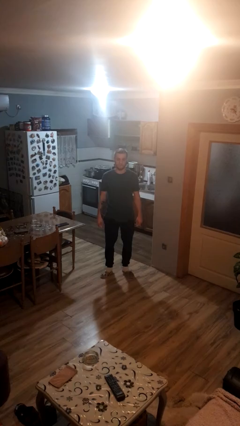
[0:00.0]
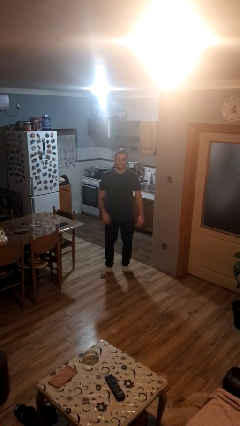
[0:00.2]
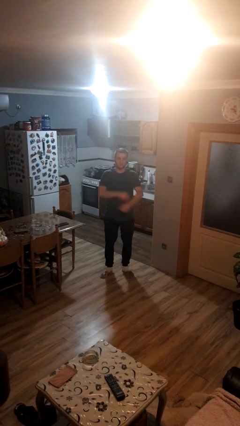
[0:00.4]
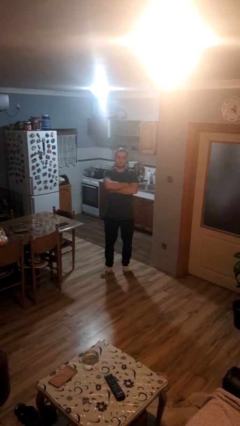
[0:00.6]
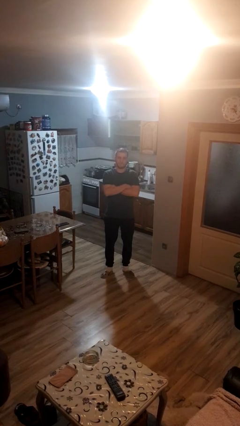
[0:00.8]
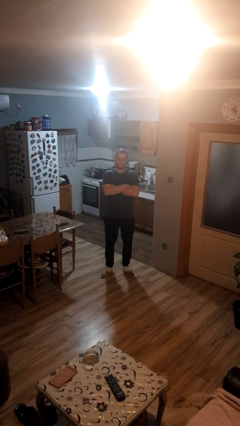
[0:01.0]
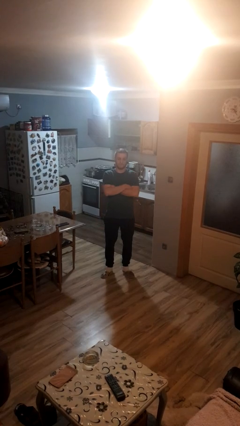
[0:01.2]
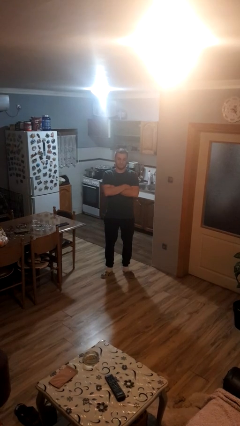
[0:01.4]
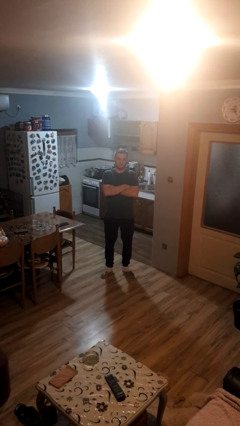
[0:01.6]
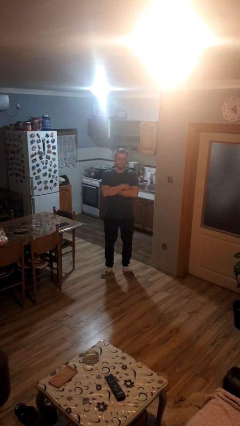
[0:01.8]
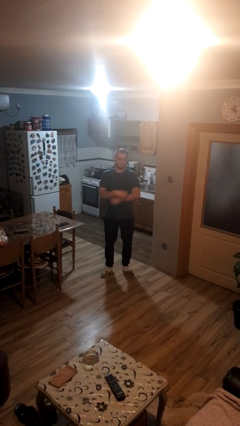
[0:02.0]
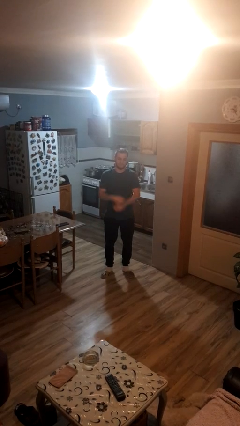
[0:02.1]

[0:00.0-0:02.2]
person crosses arms

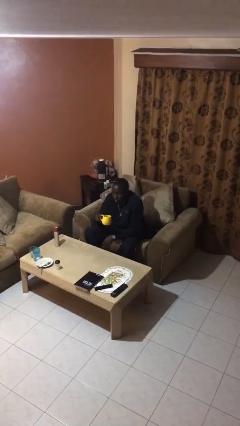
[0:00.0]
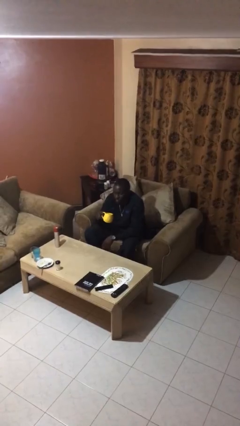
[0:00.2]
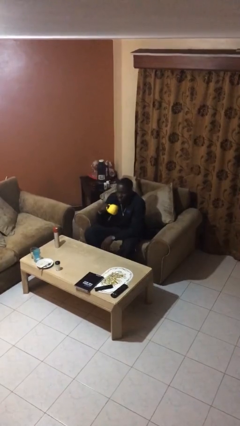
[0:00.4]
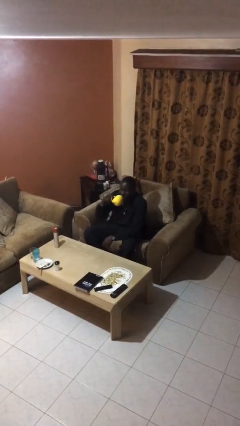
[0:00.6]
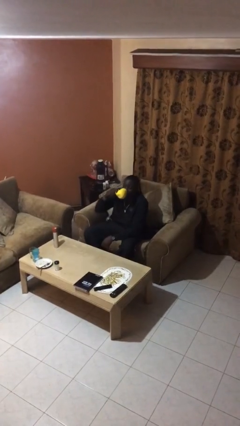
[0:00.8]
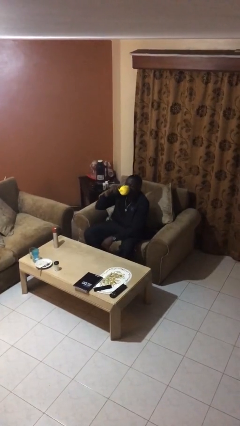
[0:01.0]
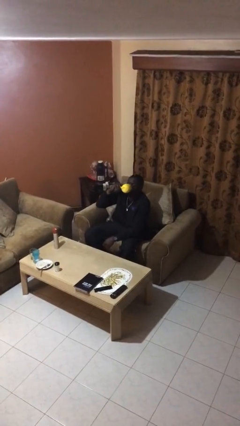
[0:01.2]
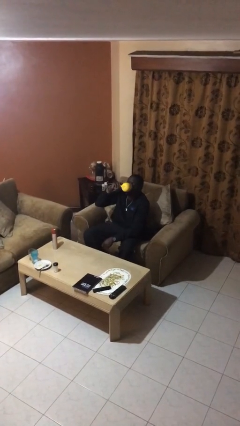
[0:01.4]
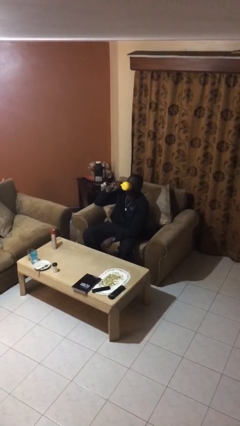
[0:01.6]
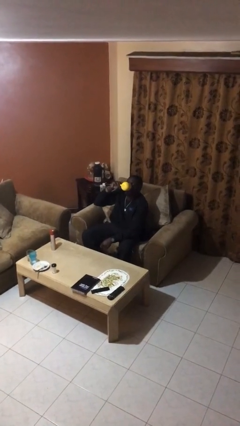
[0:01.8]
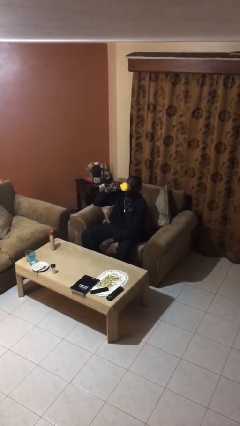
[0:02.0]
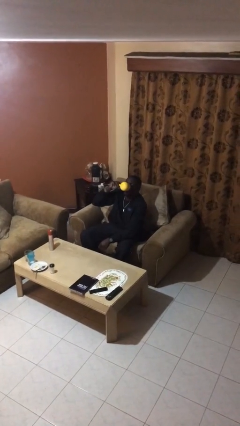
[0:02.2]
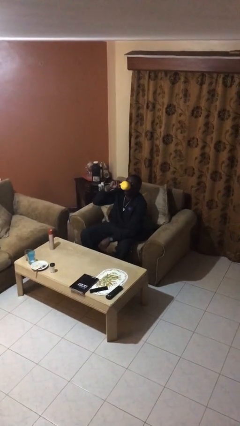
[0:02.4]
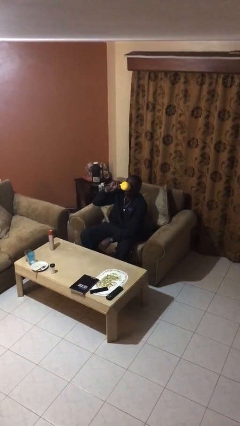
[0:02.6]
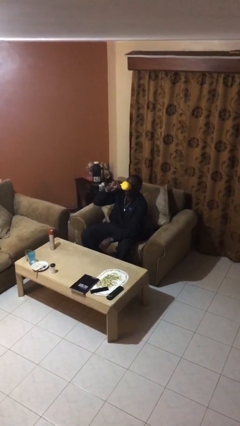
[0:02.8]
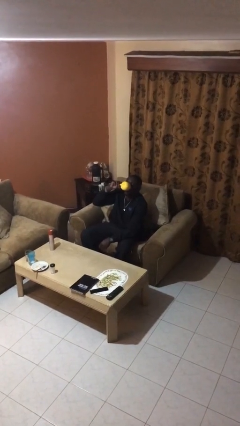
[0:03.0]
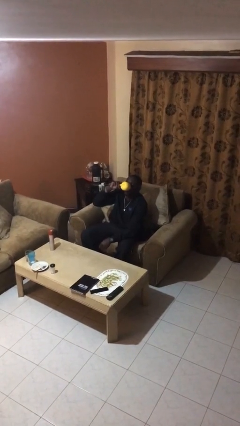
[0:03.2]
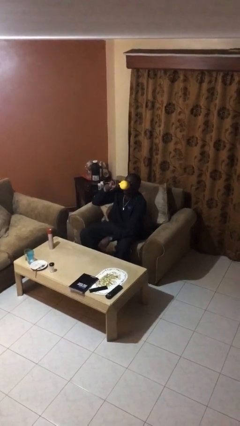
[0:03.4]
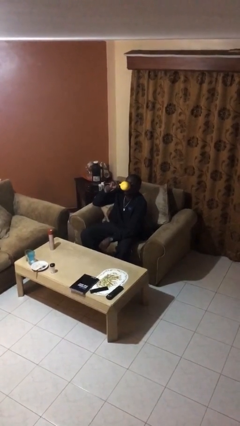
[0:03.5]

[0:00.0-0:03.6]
person drinks from mug

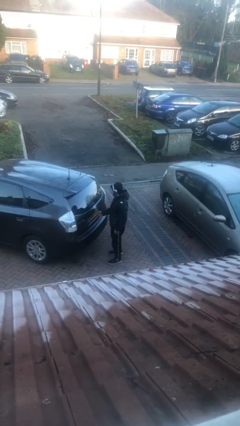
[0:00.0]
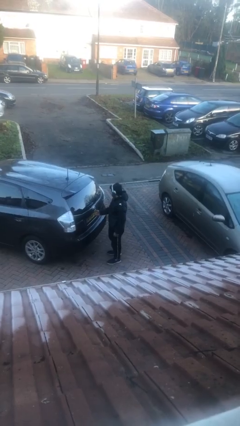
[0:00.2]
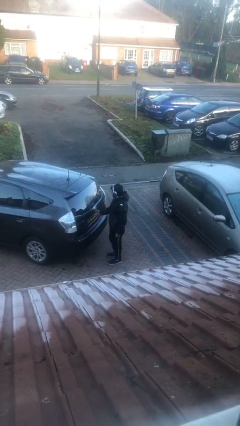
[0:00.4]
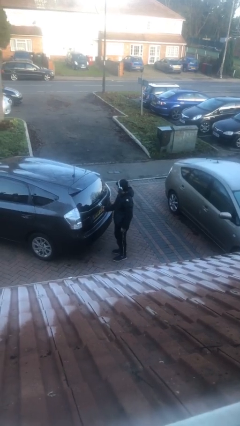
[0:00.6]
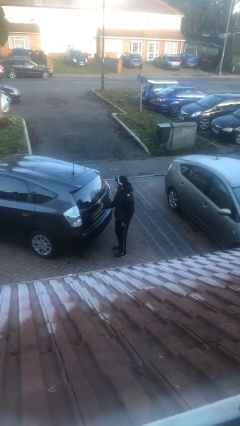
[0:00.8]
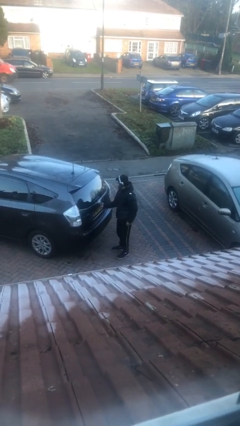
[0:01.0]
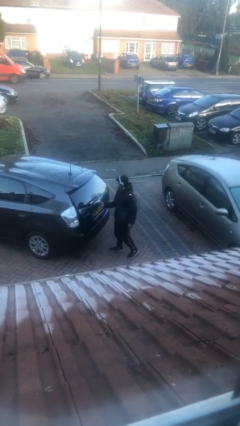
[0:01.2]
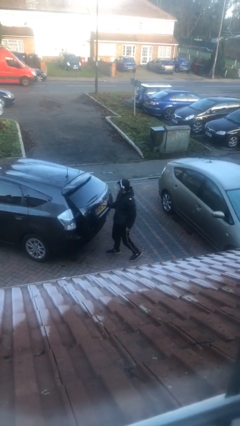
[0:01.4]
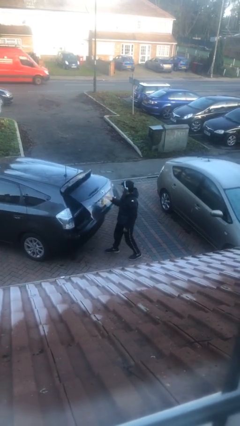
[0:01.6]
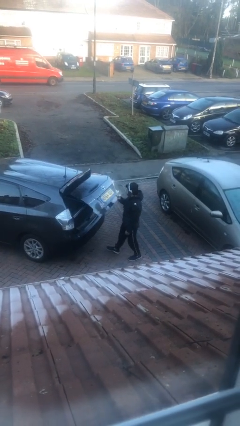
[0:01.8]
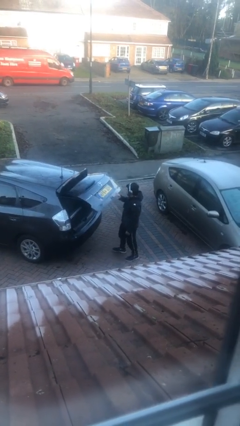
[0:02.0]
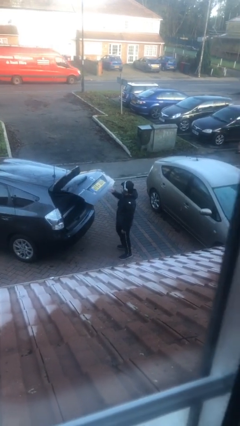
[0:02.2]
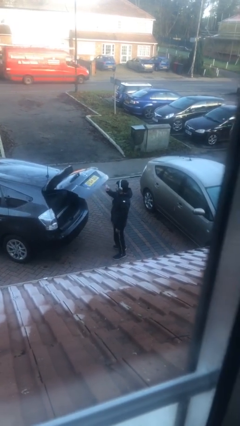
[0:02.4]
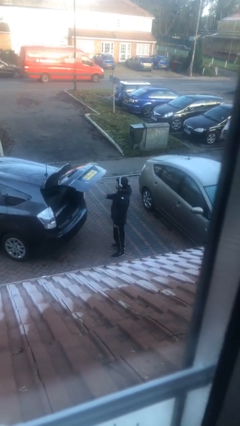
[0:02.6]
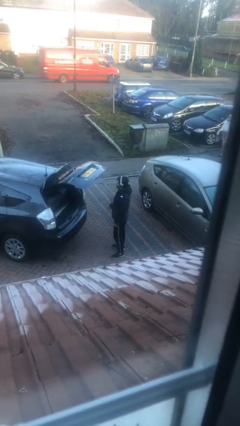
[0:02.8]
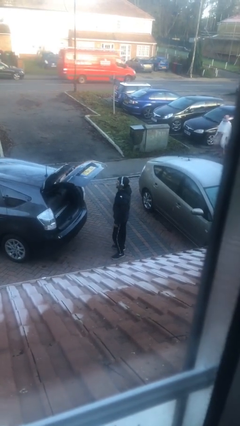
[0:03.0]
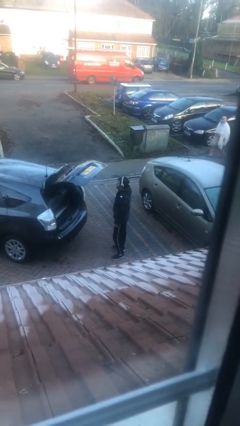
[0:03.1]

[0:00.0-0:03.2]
person opens car trunk

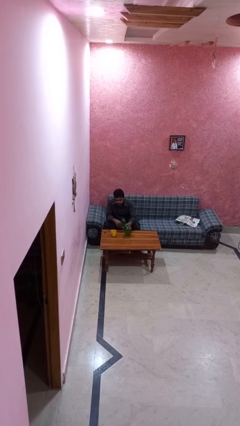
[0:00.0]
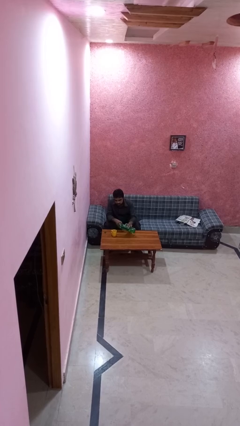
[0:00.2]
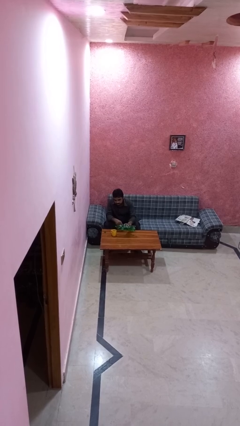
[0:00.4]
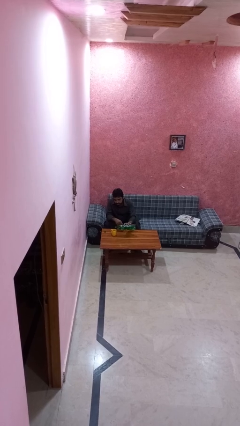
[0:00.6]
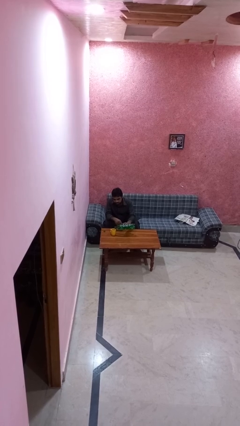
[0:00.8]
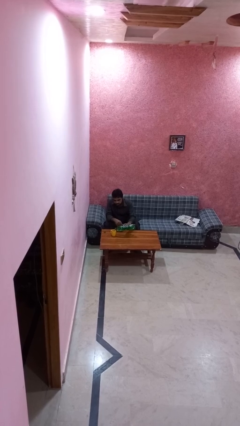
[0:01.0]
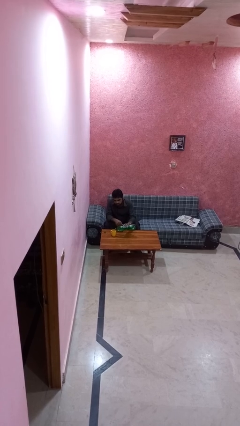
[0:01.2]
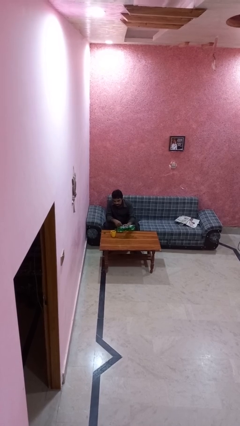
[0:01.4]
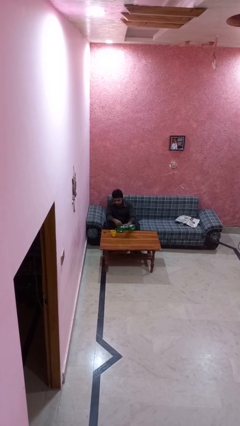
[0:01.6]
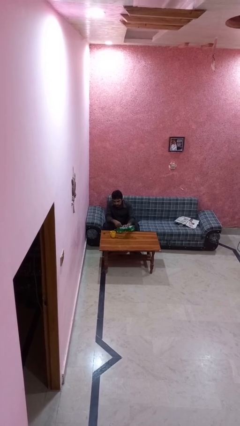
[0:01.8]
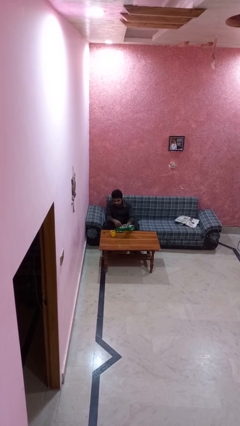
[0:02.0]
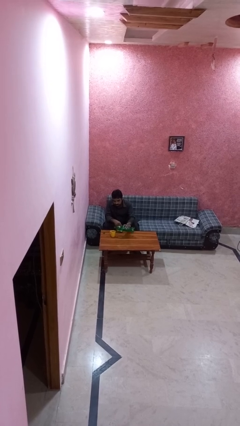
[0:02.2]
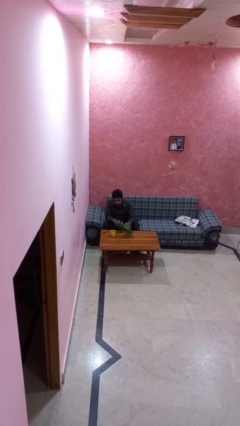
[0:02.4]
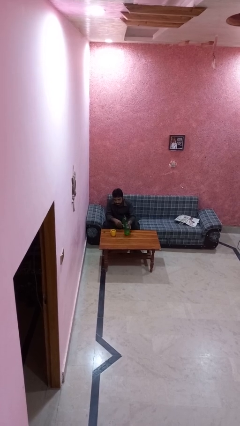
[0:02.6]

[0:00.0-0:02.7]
person pours liquid into cup

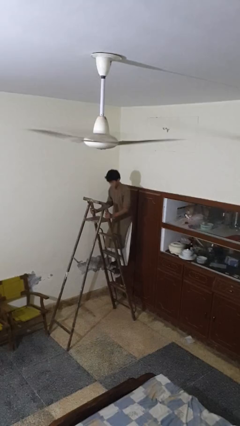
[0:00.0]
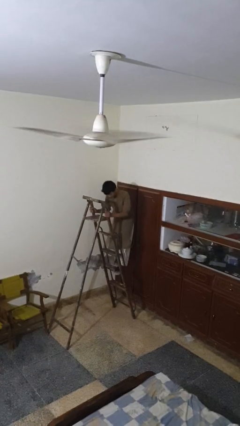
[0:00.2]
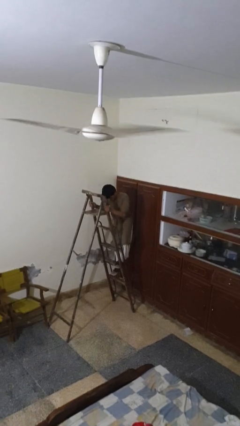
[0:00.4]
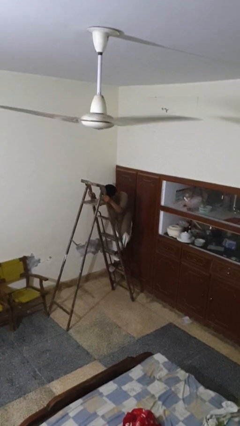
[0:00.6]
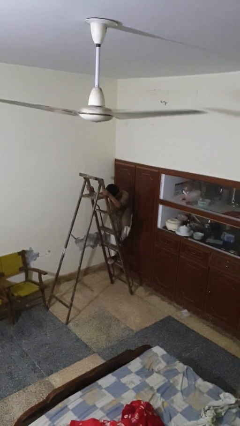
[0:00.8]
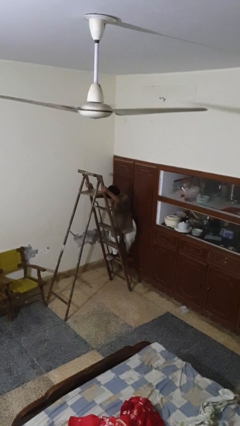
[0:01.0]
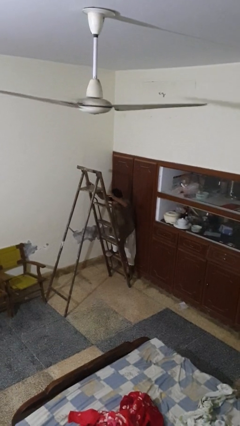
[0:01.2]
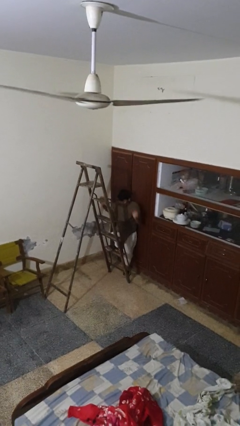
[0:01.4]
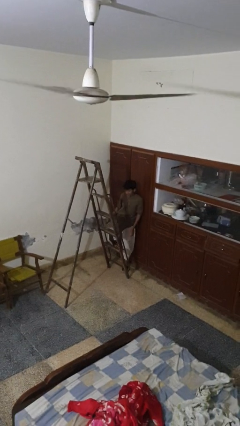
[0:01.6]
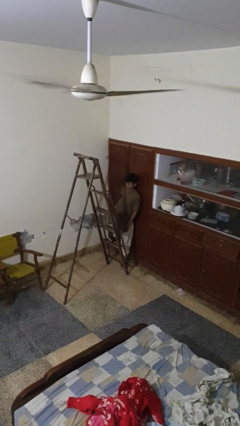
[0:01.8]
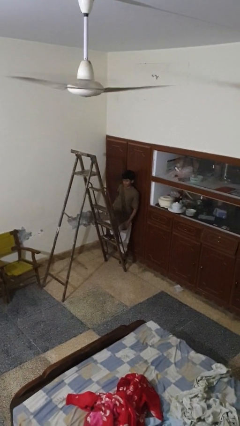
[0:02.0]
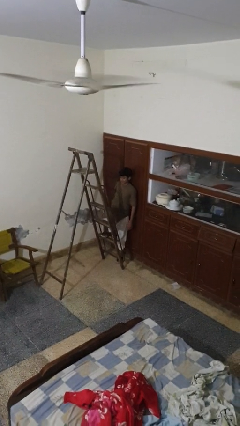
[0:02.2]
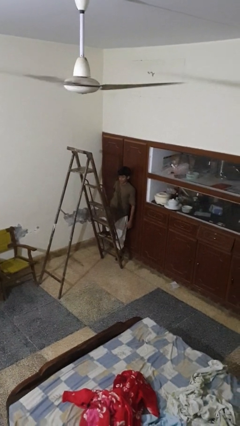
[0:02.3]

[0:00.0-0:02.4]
person climbs down ladder

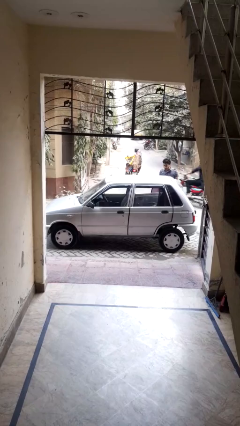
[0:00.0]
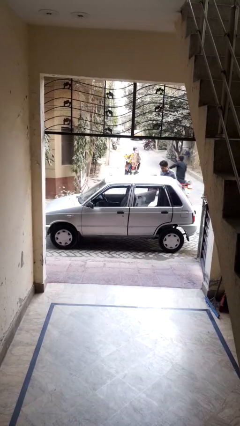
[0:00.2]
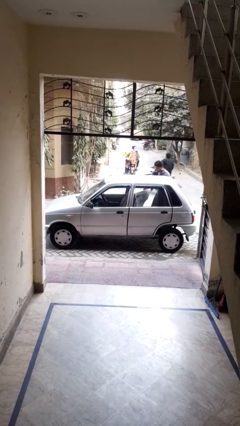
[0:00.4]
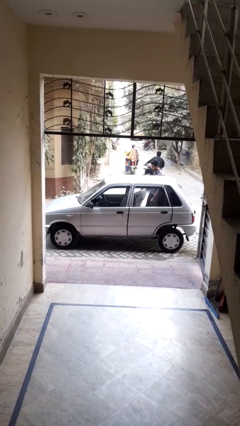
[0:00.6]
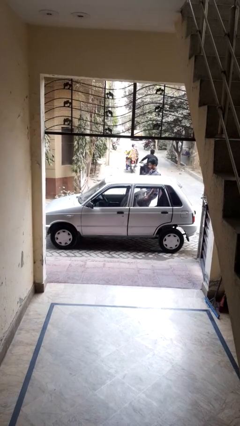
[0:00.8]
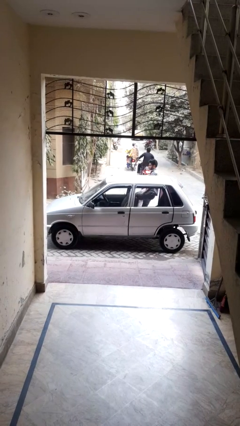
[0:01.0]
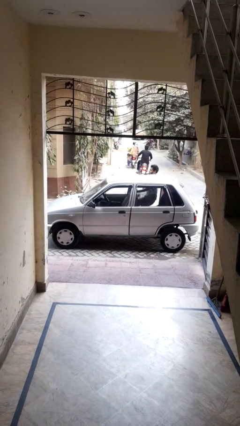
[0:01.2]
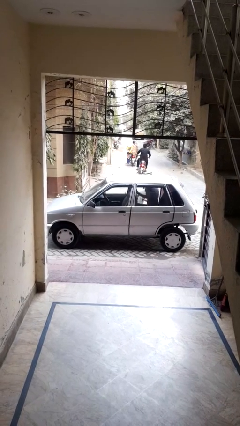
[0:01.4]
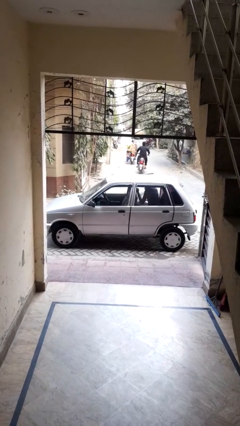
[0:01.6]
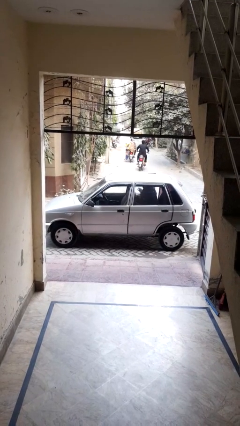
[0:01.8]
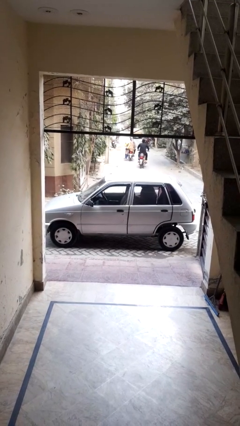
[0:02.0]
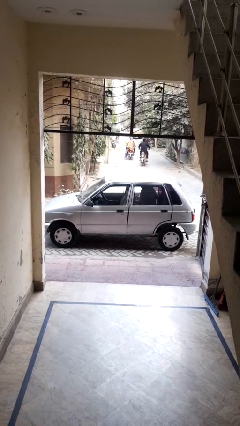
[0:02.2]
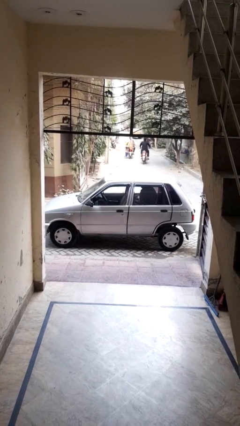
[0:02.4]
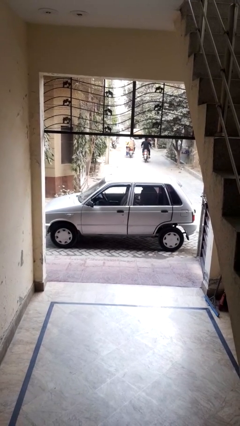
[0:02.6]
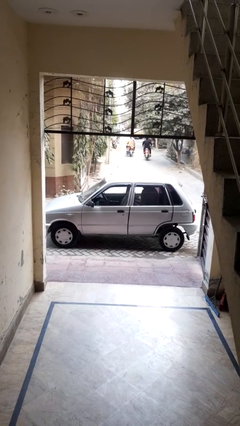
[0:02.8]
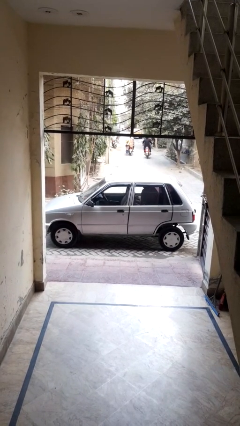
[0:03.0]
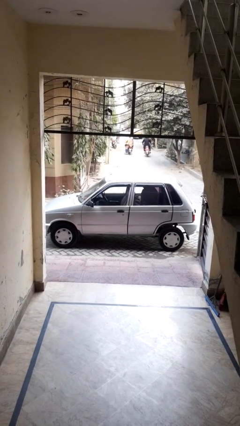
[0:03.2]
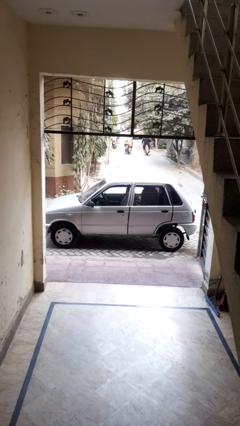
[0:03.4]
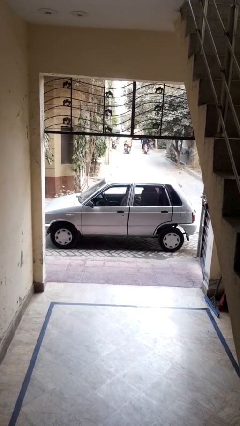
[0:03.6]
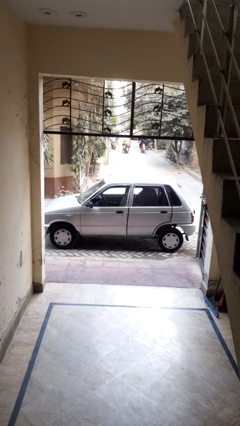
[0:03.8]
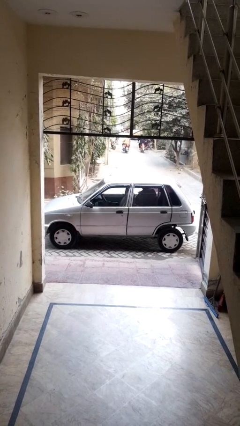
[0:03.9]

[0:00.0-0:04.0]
car picks up person
